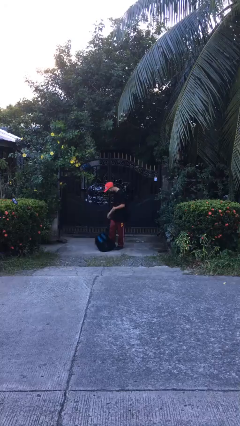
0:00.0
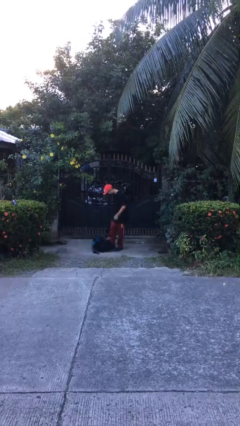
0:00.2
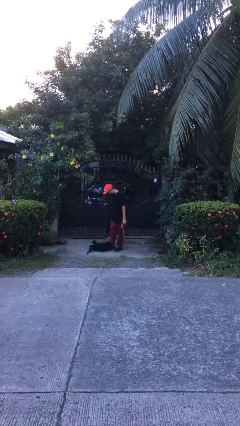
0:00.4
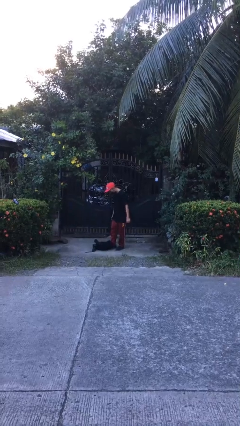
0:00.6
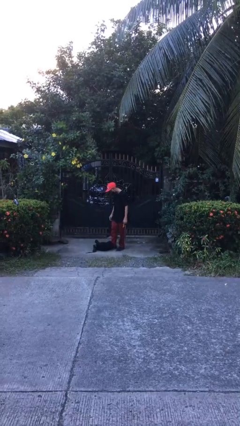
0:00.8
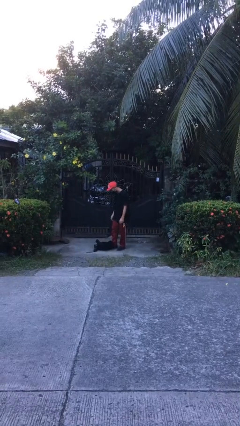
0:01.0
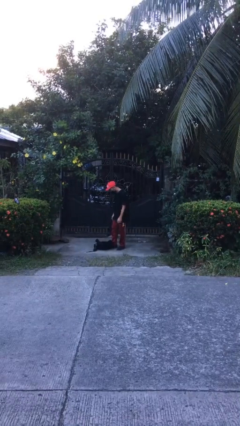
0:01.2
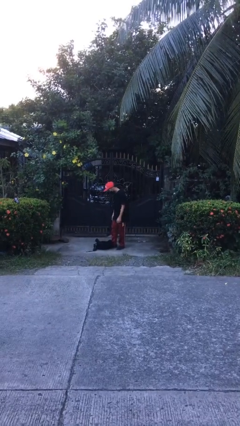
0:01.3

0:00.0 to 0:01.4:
person drops object

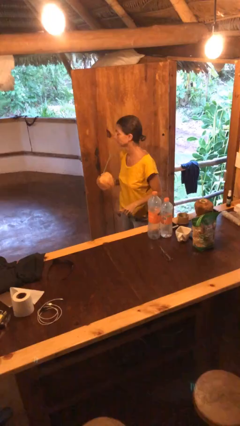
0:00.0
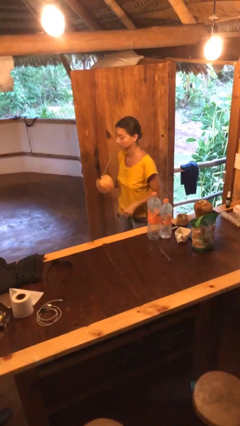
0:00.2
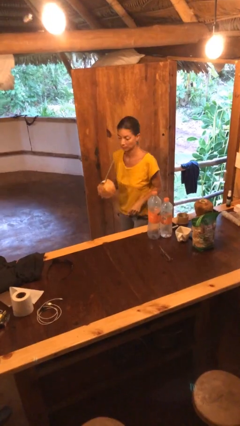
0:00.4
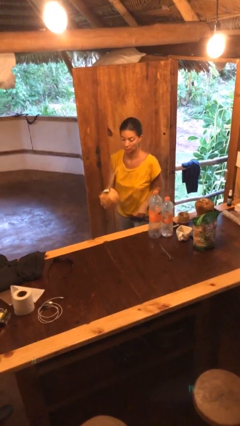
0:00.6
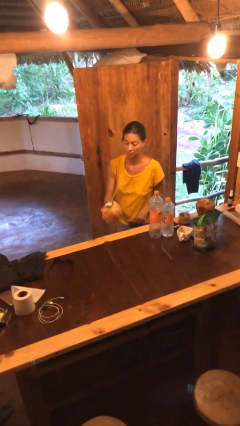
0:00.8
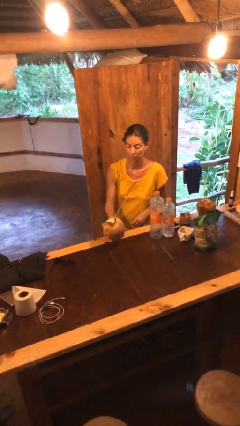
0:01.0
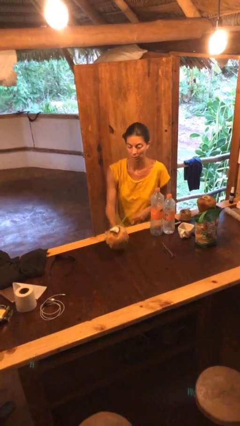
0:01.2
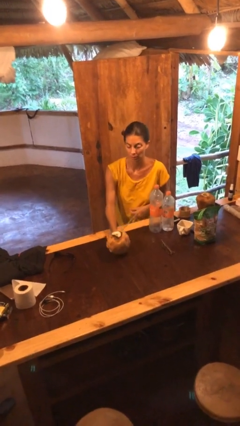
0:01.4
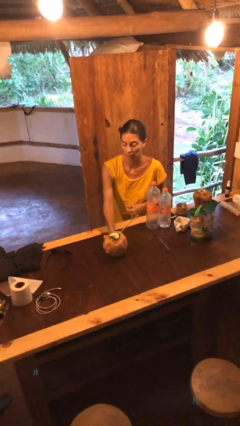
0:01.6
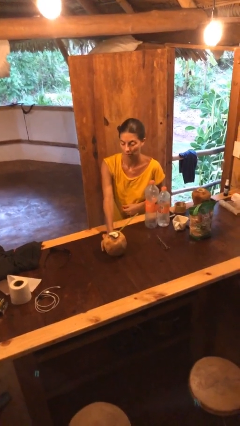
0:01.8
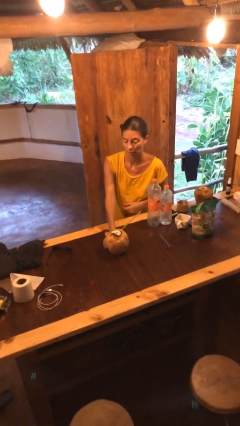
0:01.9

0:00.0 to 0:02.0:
person puts down object on table

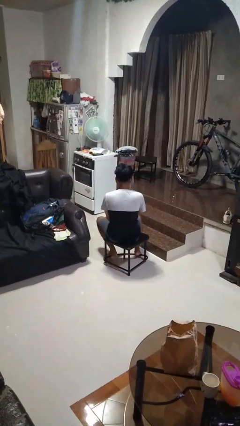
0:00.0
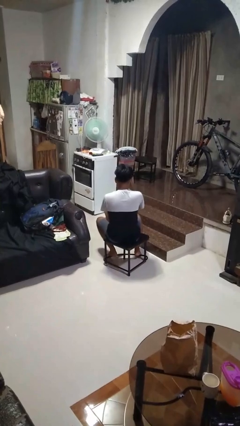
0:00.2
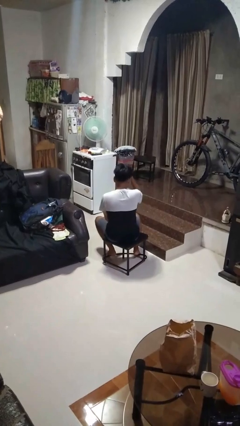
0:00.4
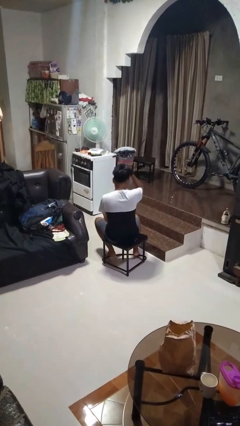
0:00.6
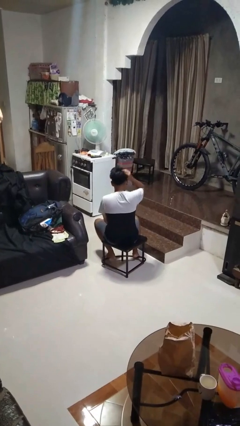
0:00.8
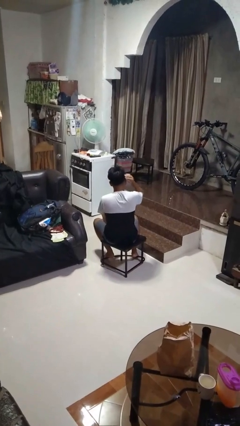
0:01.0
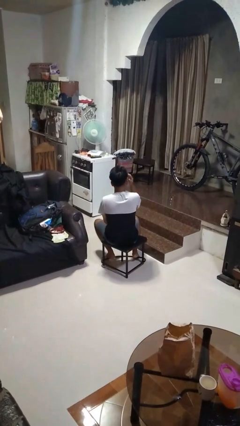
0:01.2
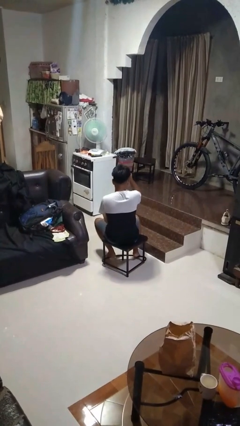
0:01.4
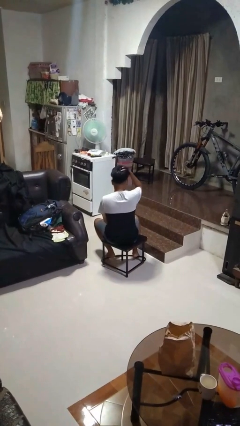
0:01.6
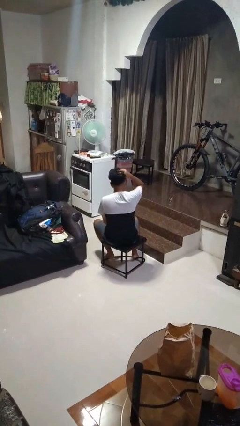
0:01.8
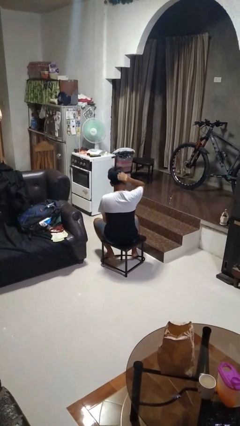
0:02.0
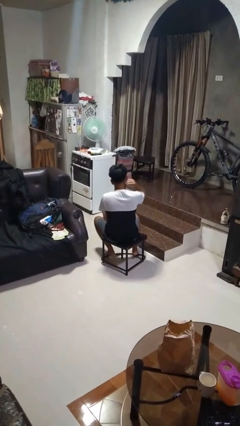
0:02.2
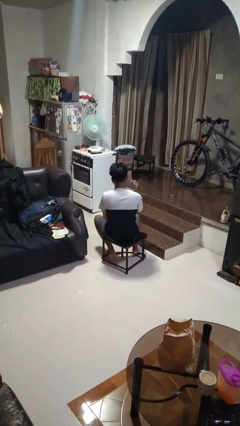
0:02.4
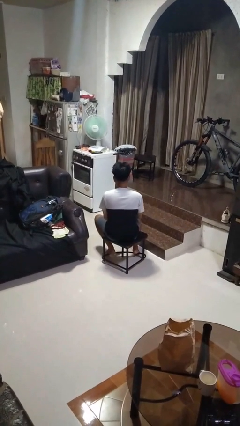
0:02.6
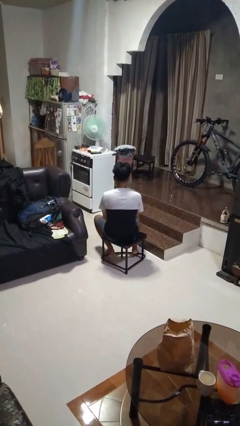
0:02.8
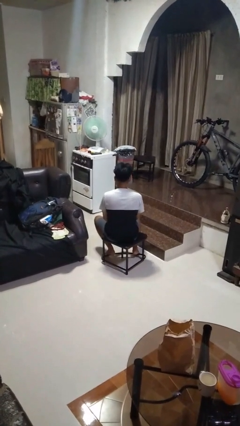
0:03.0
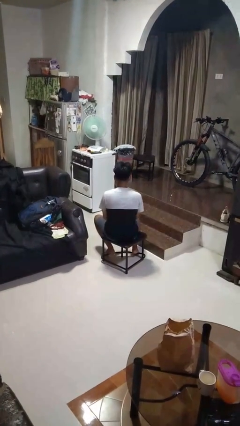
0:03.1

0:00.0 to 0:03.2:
person strokes hair

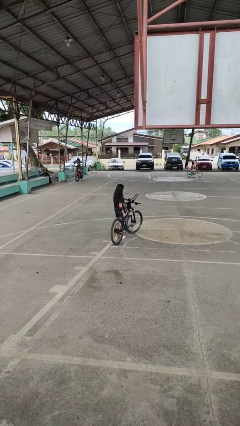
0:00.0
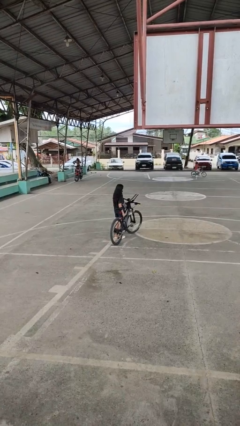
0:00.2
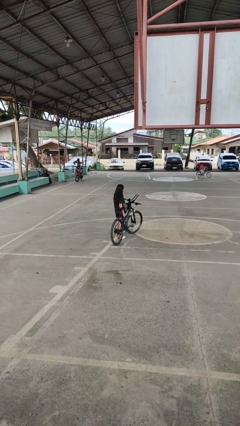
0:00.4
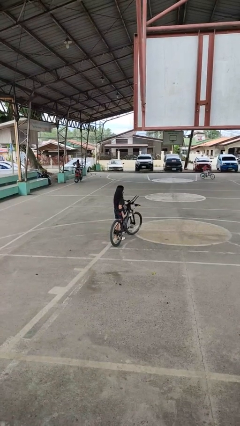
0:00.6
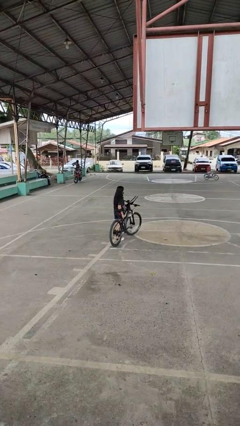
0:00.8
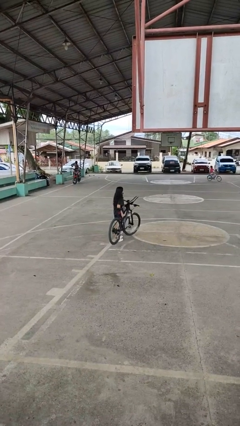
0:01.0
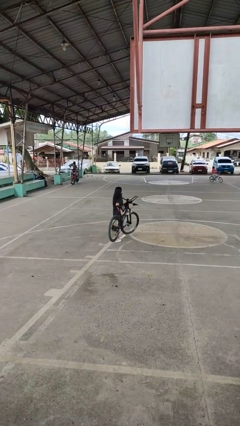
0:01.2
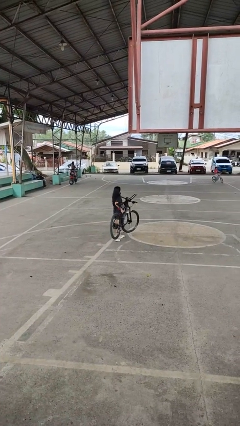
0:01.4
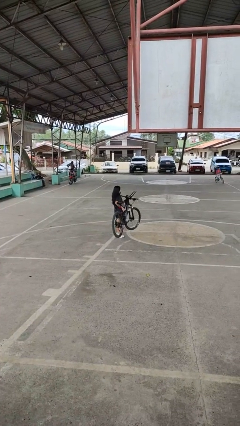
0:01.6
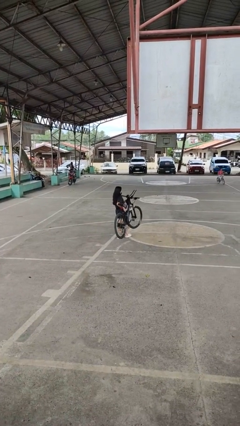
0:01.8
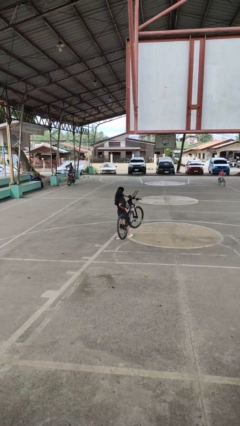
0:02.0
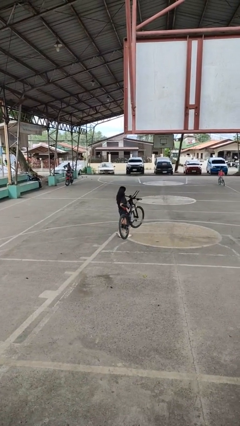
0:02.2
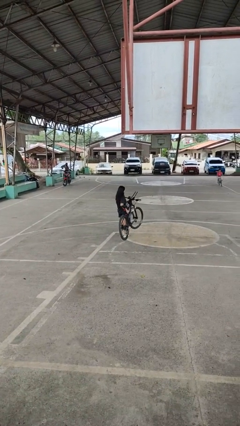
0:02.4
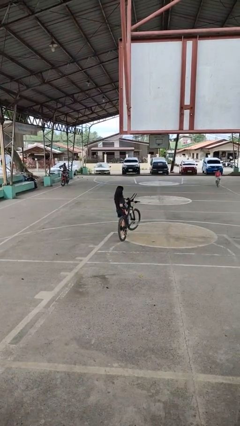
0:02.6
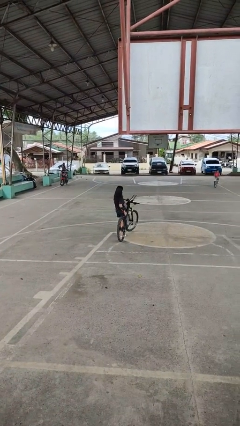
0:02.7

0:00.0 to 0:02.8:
person carries bicycle

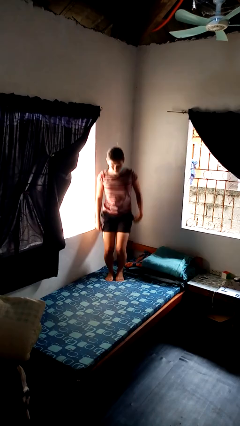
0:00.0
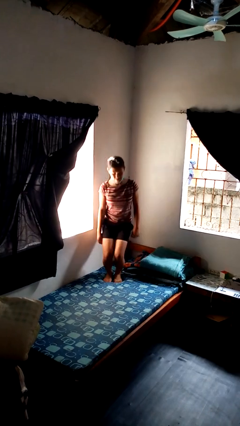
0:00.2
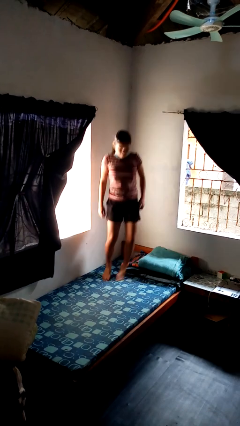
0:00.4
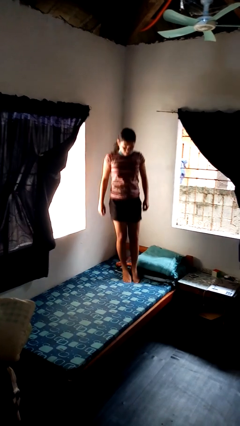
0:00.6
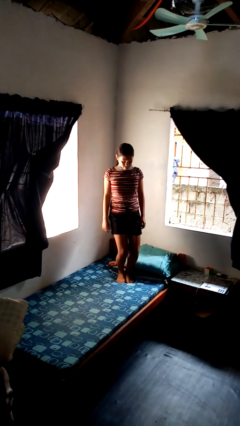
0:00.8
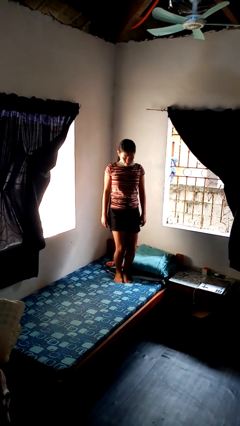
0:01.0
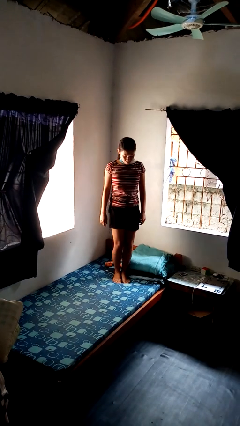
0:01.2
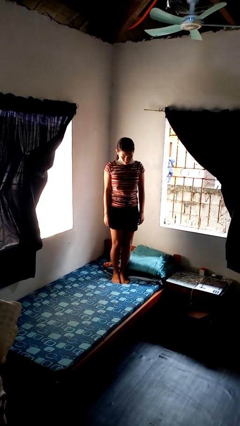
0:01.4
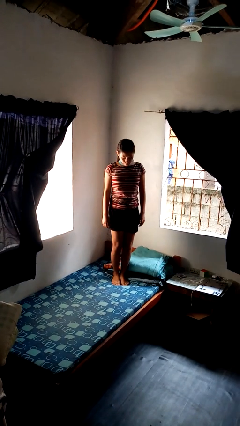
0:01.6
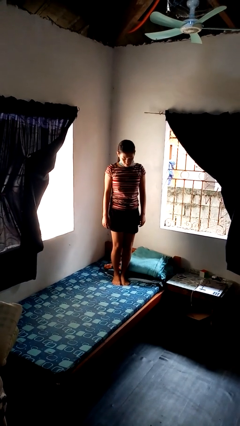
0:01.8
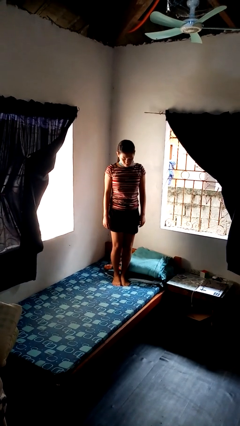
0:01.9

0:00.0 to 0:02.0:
person jumps on bed

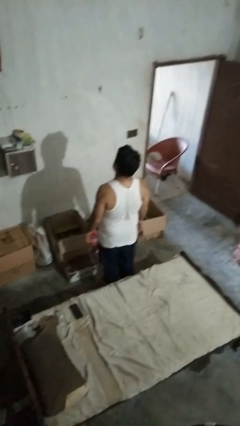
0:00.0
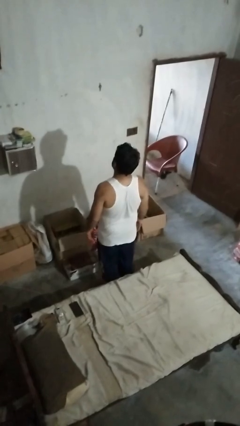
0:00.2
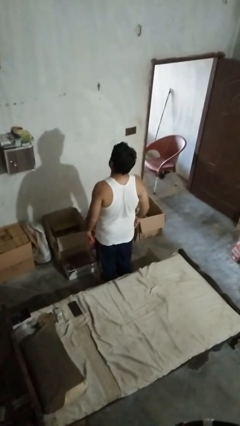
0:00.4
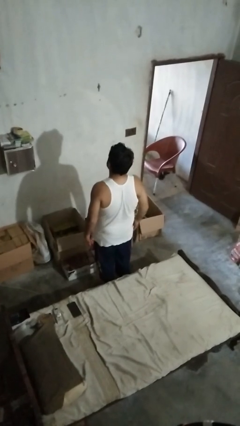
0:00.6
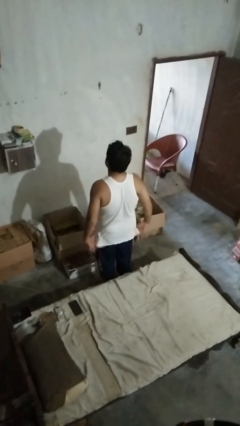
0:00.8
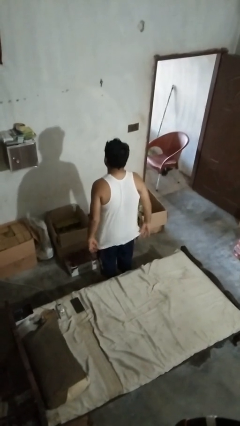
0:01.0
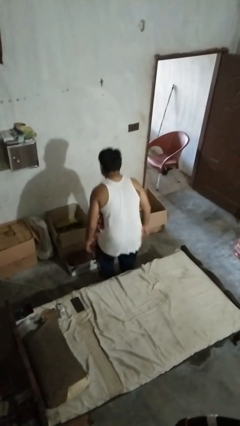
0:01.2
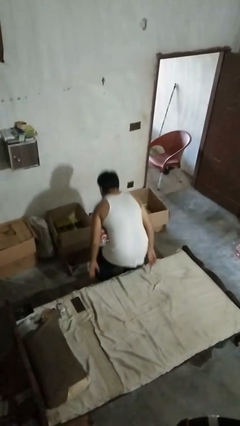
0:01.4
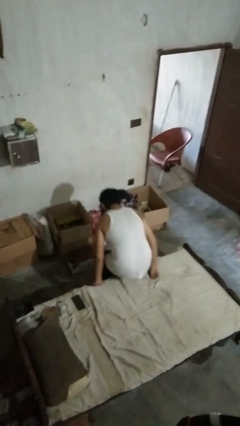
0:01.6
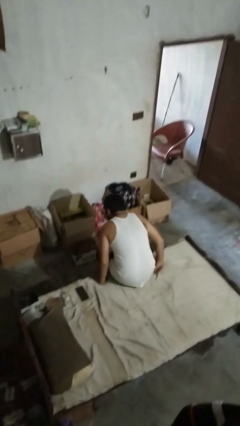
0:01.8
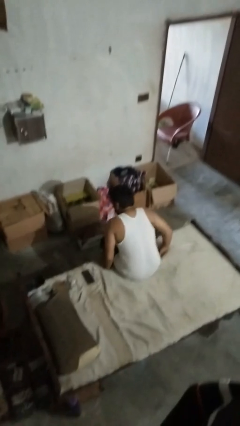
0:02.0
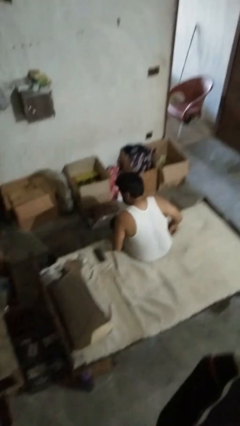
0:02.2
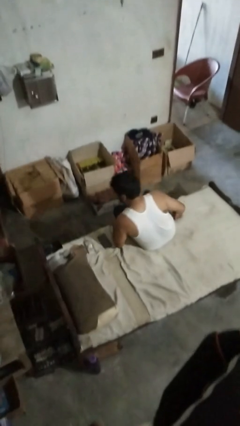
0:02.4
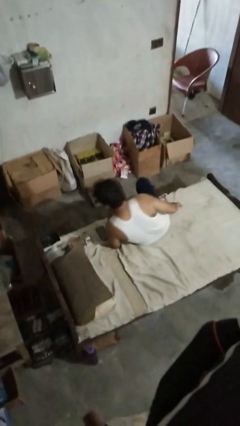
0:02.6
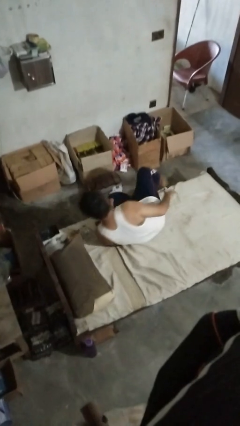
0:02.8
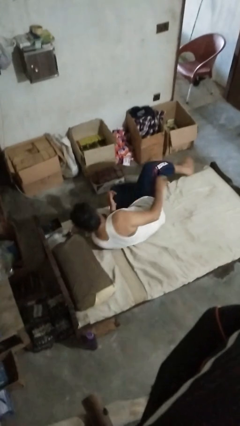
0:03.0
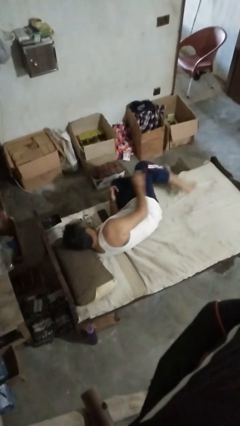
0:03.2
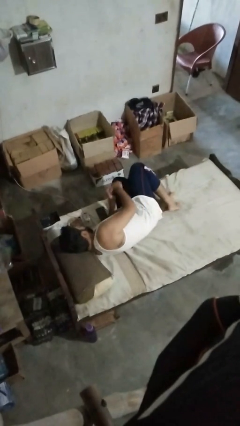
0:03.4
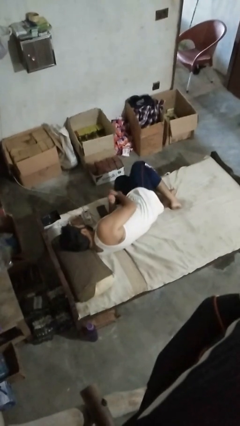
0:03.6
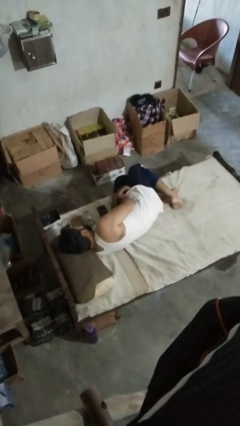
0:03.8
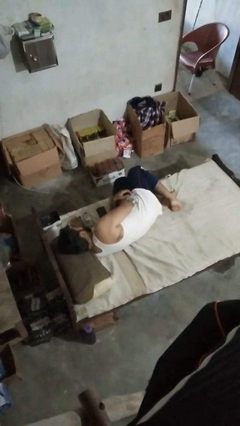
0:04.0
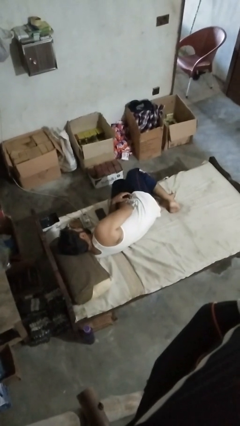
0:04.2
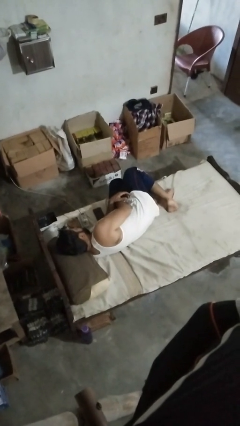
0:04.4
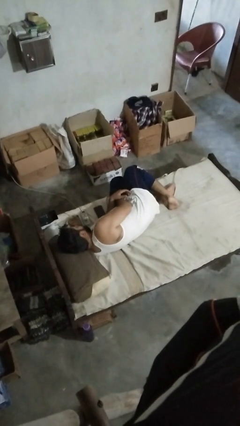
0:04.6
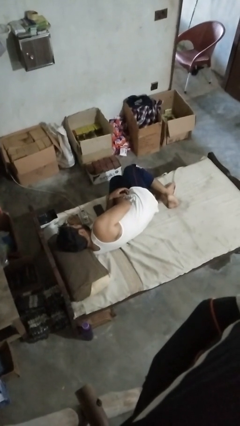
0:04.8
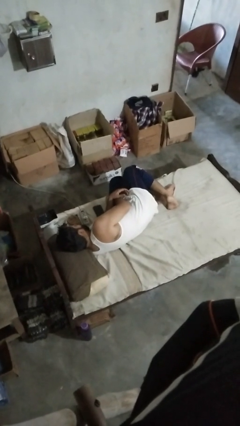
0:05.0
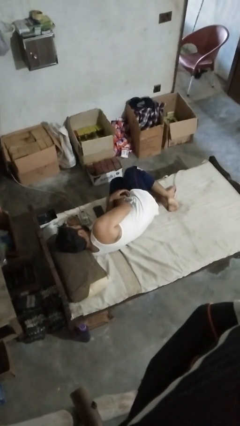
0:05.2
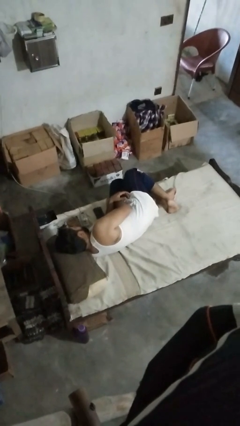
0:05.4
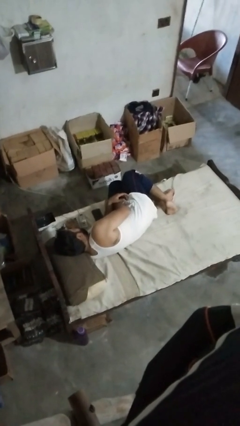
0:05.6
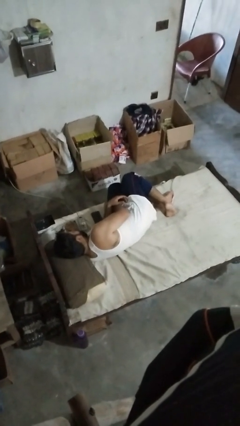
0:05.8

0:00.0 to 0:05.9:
person lies down on bed
